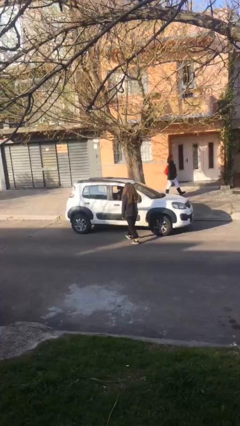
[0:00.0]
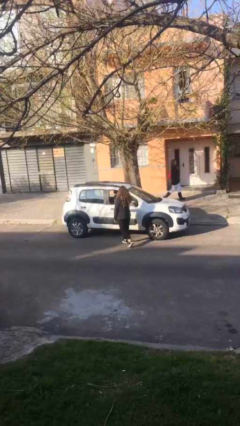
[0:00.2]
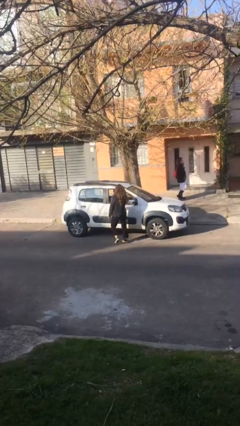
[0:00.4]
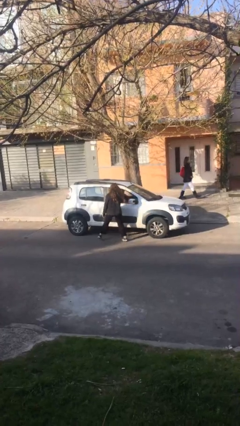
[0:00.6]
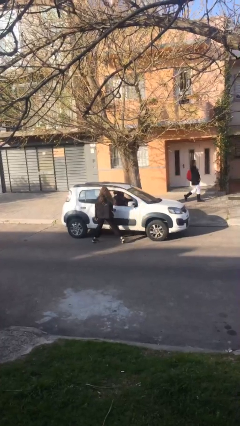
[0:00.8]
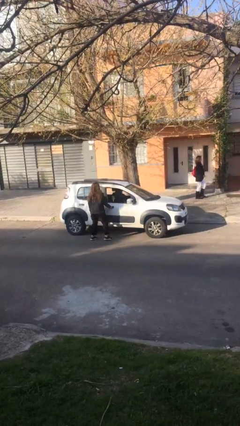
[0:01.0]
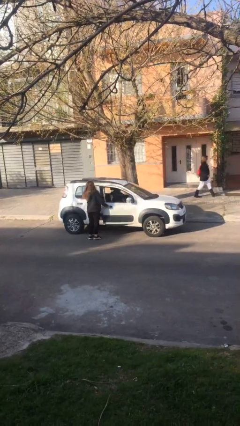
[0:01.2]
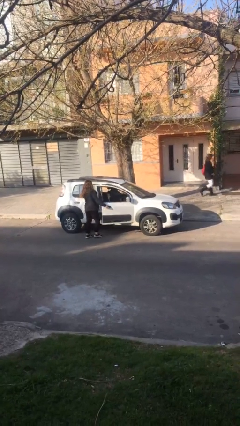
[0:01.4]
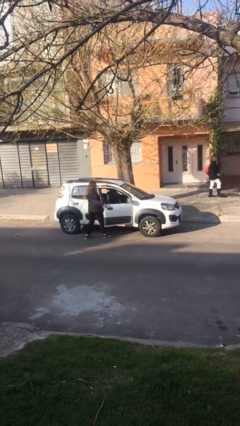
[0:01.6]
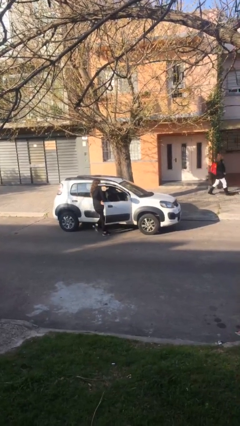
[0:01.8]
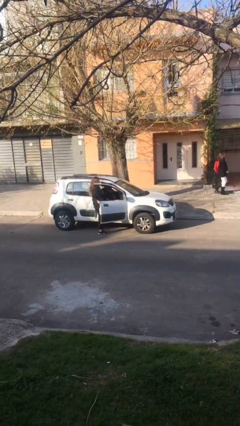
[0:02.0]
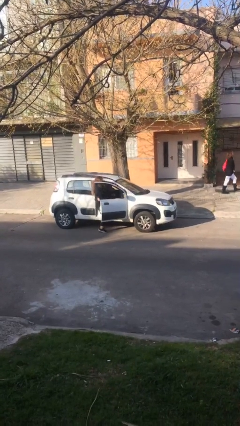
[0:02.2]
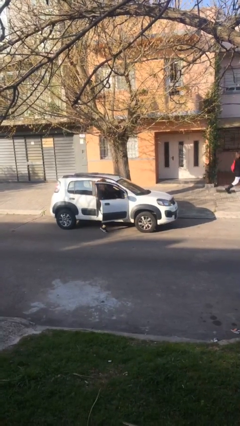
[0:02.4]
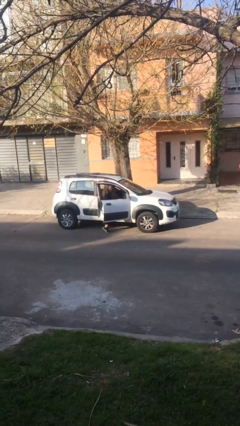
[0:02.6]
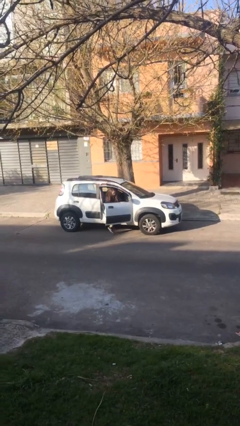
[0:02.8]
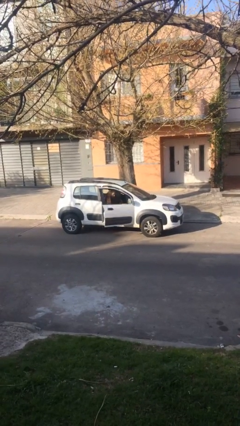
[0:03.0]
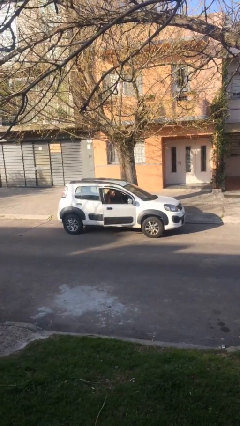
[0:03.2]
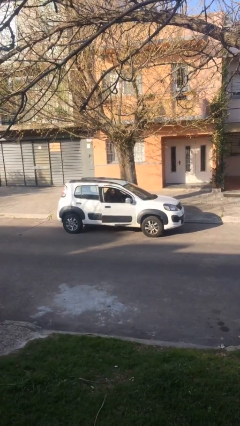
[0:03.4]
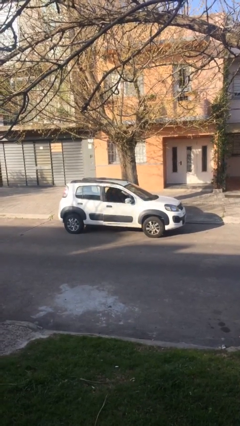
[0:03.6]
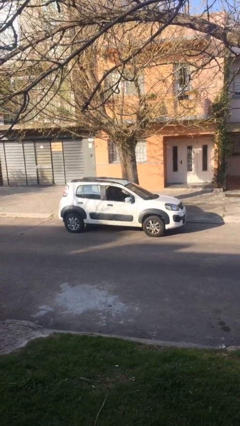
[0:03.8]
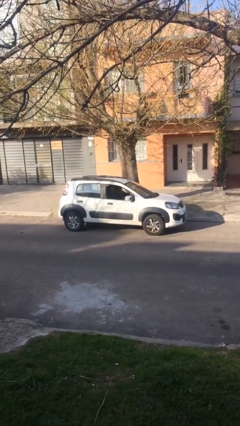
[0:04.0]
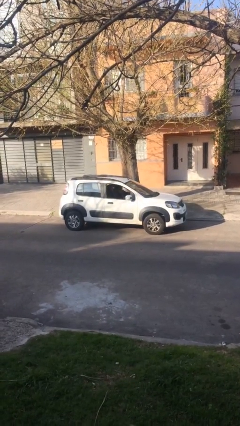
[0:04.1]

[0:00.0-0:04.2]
car picks up person

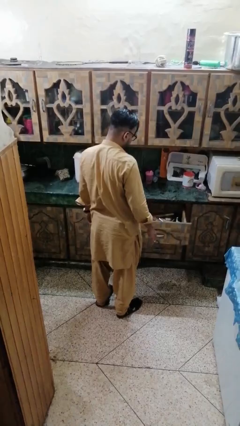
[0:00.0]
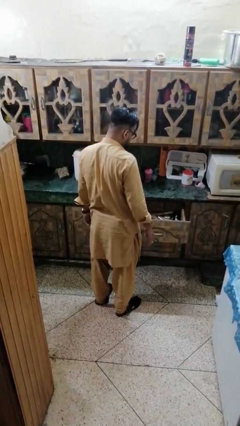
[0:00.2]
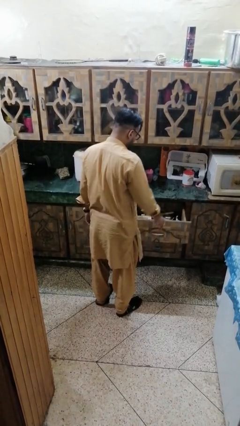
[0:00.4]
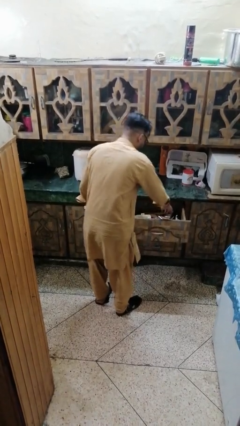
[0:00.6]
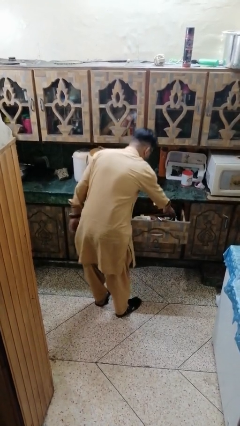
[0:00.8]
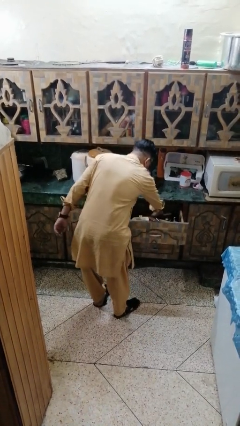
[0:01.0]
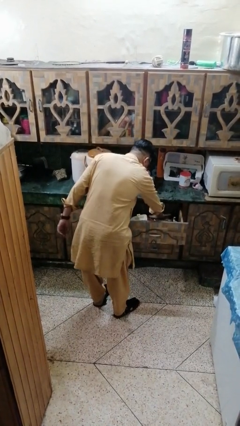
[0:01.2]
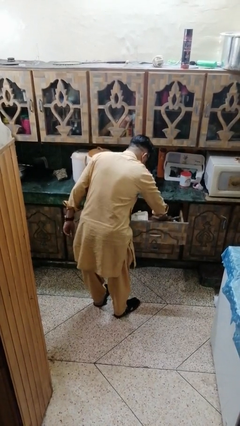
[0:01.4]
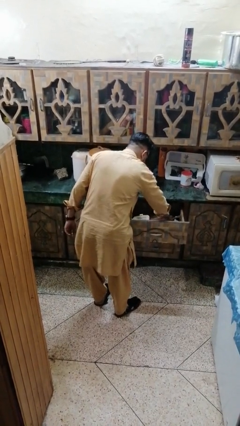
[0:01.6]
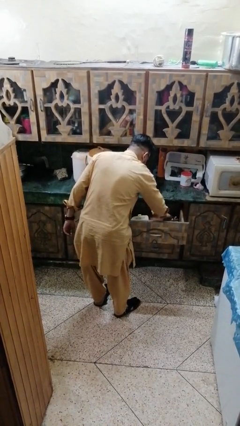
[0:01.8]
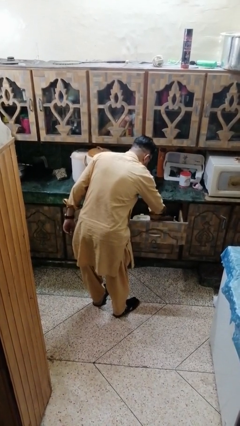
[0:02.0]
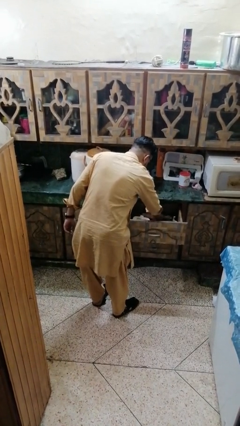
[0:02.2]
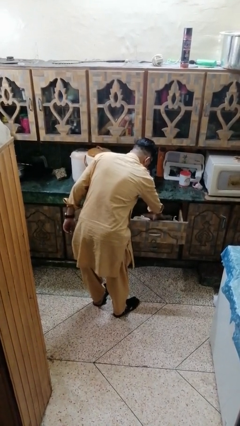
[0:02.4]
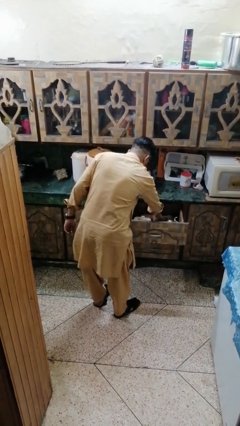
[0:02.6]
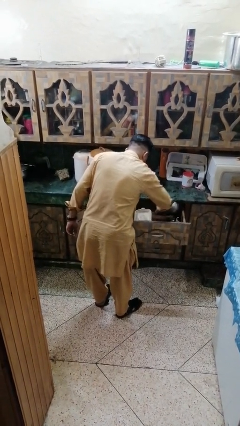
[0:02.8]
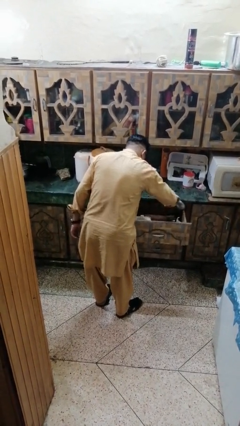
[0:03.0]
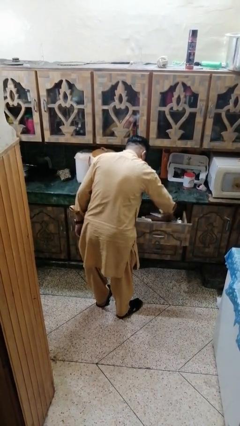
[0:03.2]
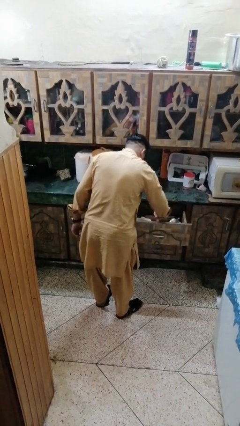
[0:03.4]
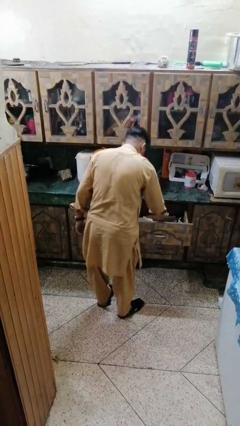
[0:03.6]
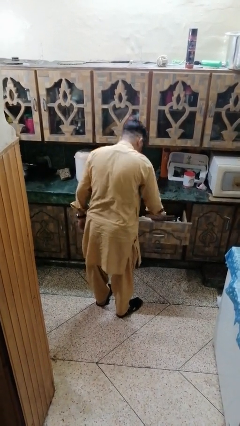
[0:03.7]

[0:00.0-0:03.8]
person searches in kitchen drawer

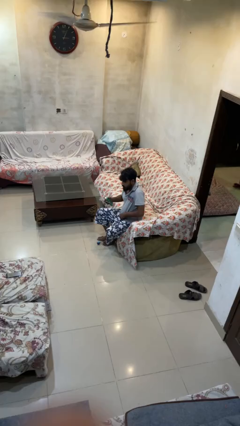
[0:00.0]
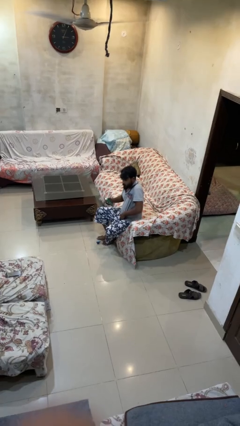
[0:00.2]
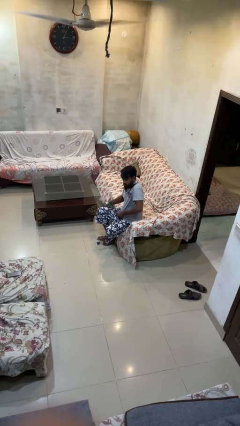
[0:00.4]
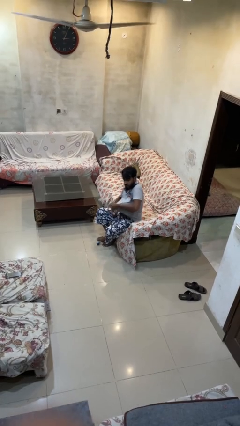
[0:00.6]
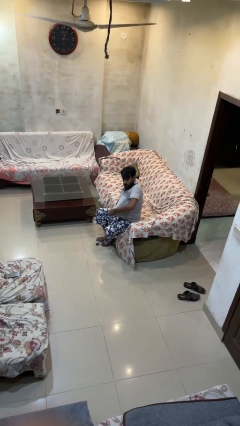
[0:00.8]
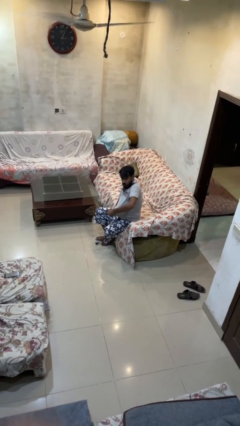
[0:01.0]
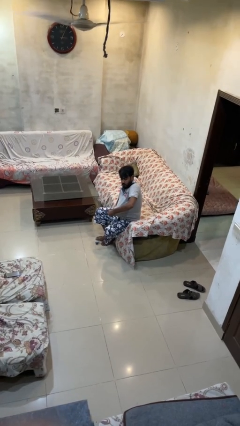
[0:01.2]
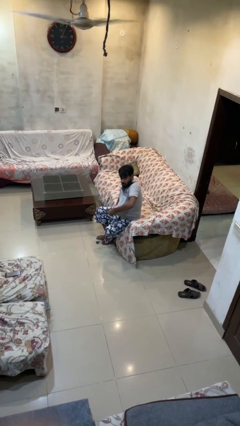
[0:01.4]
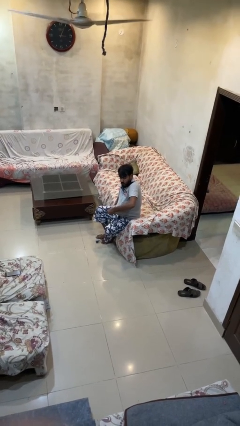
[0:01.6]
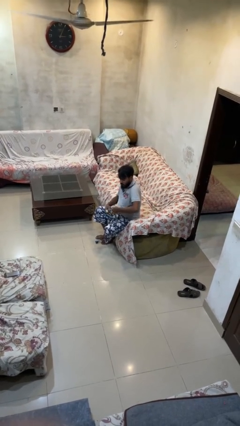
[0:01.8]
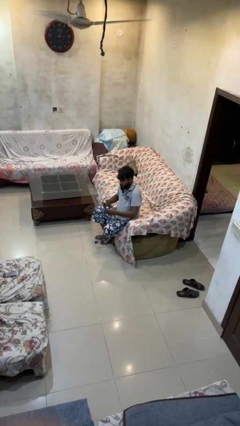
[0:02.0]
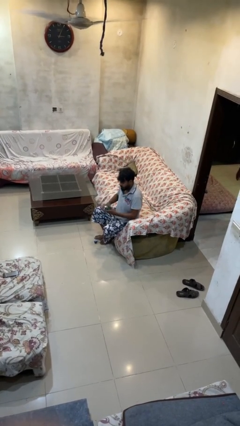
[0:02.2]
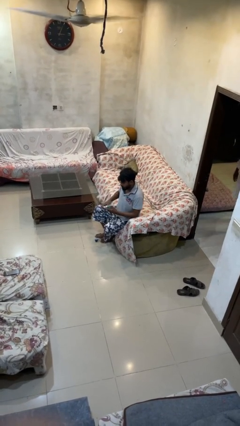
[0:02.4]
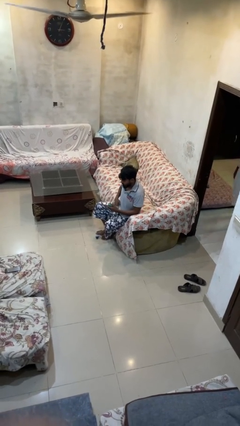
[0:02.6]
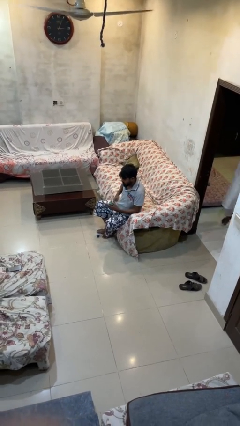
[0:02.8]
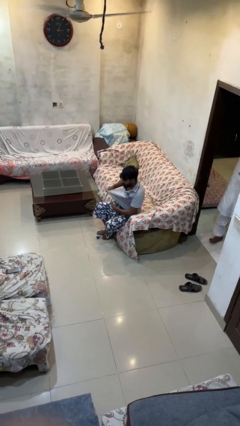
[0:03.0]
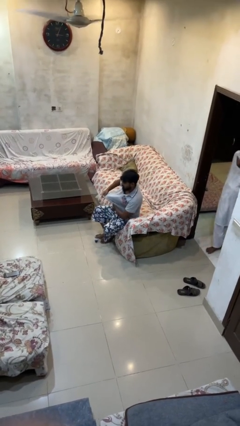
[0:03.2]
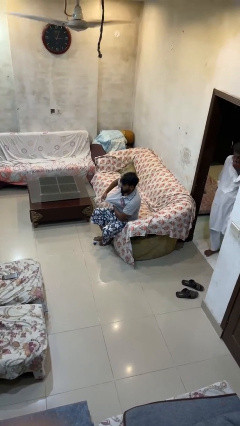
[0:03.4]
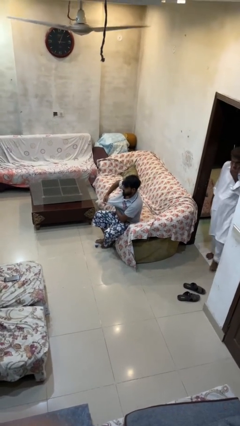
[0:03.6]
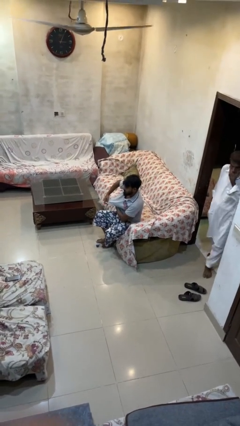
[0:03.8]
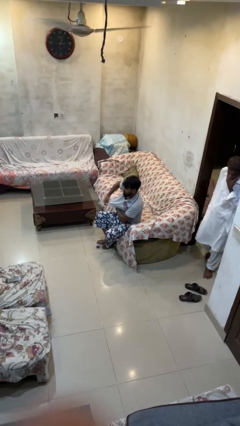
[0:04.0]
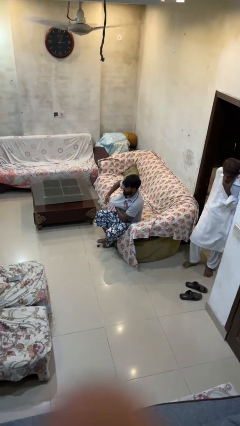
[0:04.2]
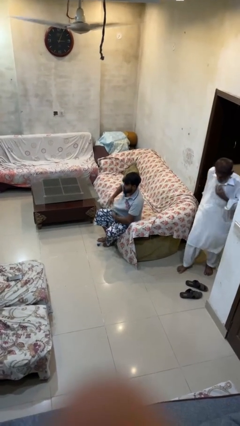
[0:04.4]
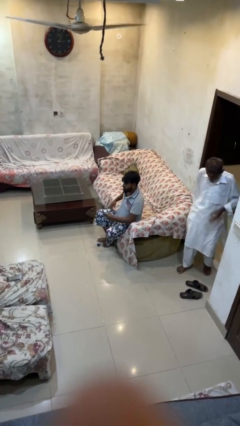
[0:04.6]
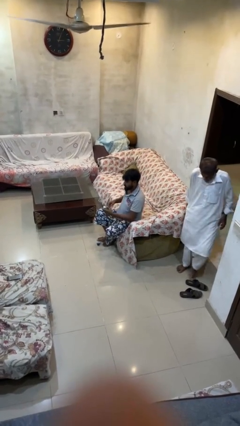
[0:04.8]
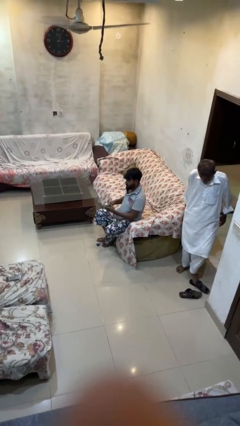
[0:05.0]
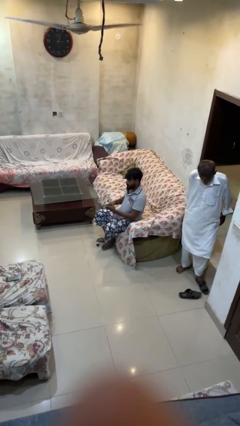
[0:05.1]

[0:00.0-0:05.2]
person applies deodorant

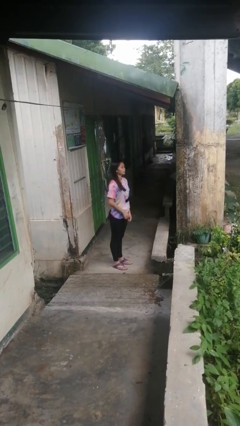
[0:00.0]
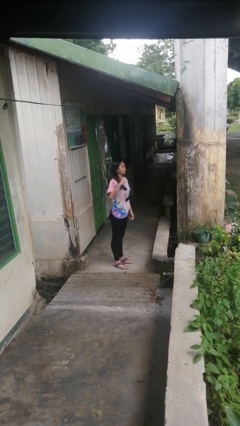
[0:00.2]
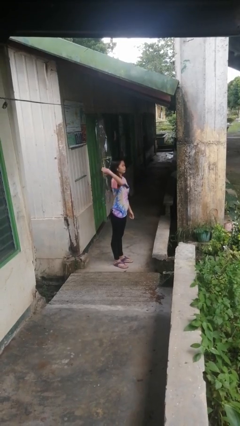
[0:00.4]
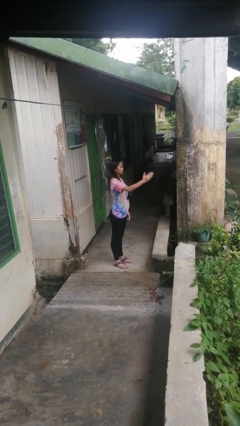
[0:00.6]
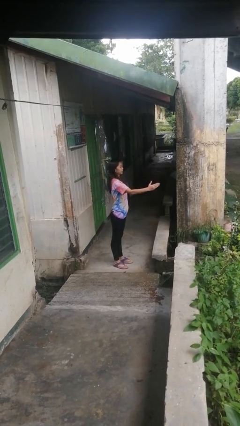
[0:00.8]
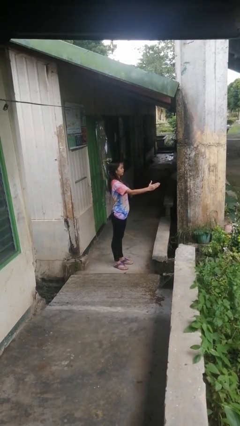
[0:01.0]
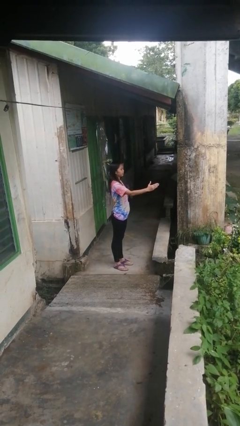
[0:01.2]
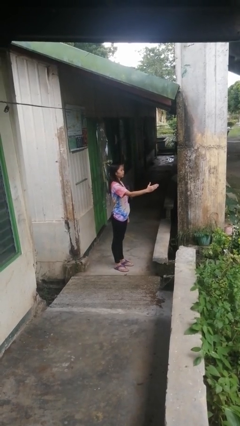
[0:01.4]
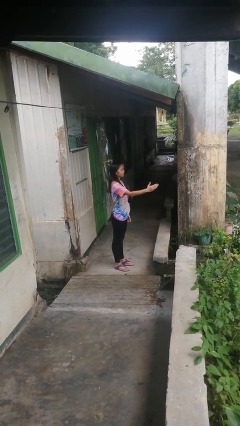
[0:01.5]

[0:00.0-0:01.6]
person karate chop

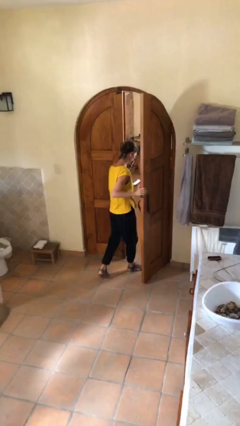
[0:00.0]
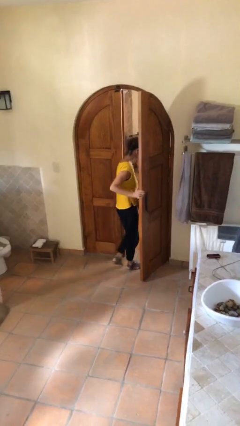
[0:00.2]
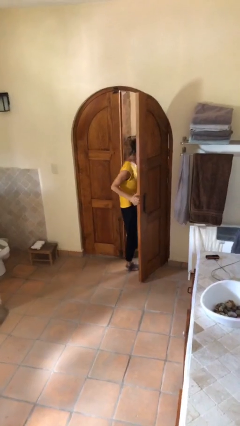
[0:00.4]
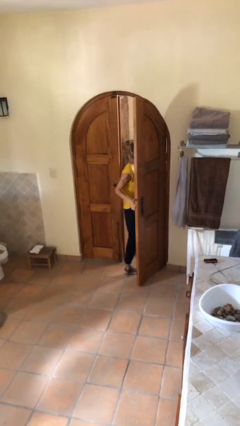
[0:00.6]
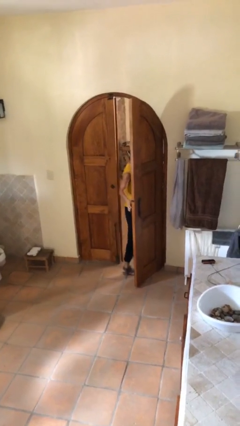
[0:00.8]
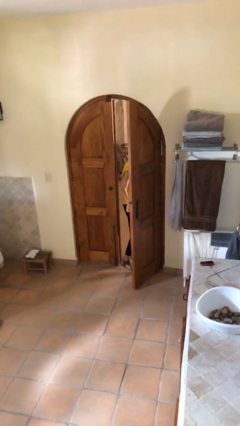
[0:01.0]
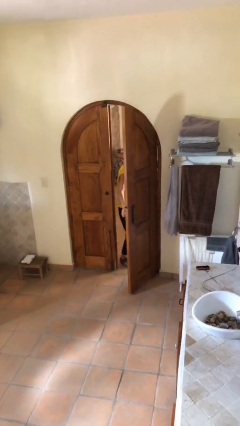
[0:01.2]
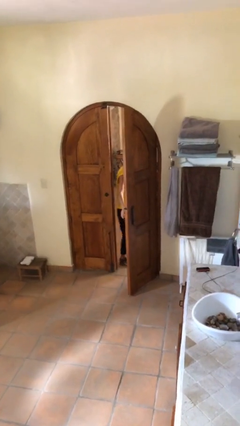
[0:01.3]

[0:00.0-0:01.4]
person exits scene through structure

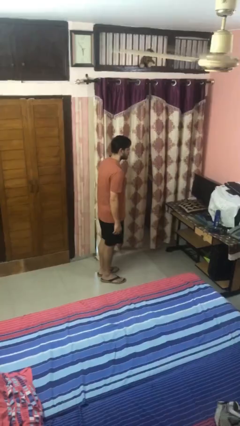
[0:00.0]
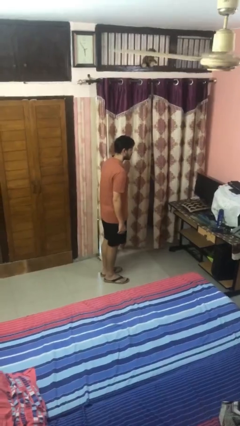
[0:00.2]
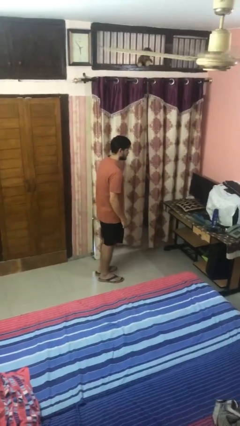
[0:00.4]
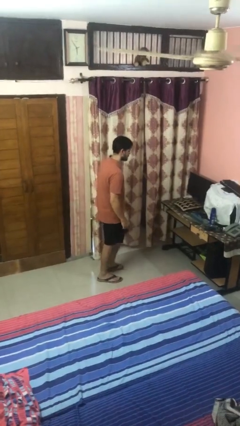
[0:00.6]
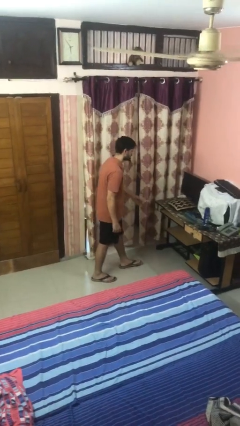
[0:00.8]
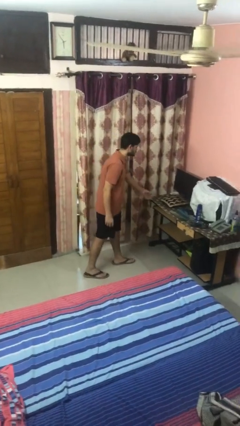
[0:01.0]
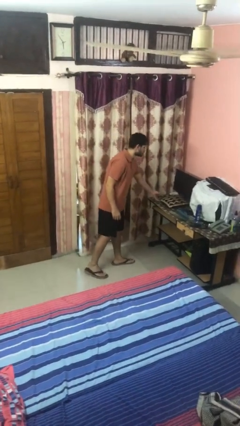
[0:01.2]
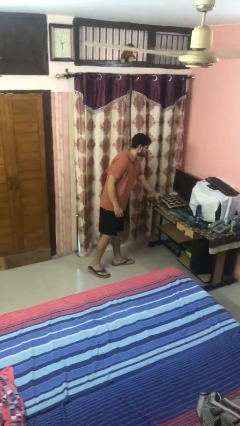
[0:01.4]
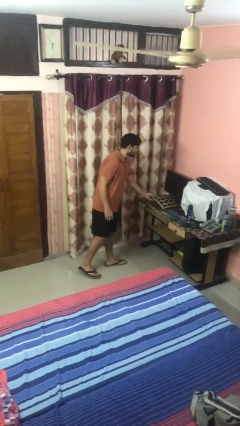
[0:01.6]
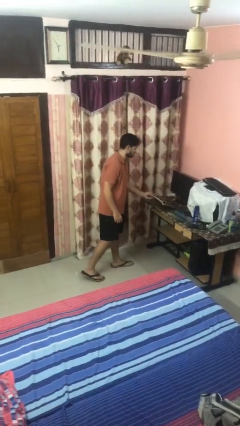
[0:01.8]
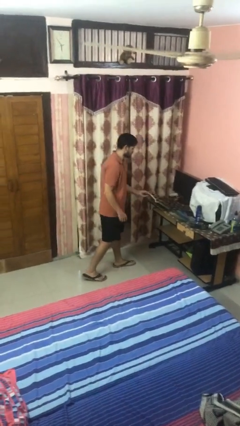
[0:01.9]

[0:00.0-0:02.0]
person picks up object from table
